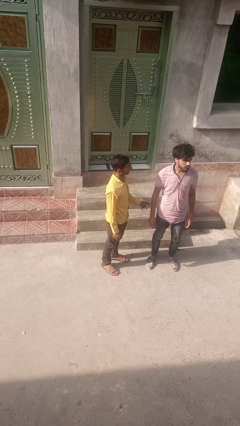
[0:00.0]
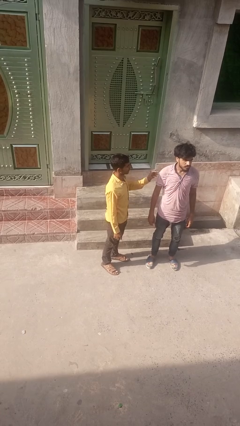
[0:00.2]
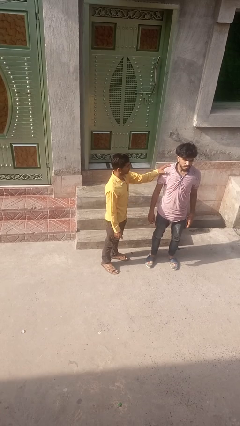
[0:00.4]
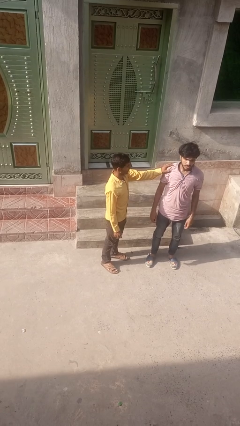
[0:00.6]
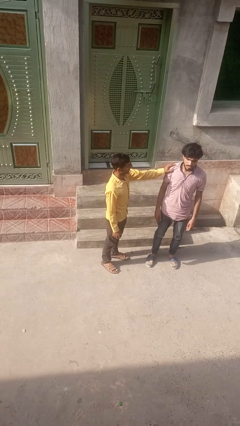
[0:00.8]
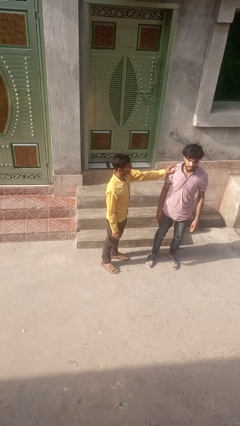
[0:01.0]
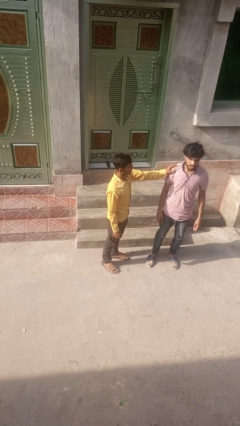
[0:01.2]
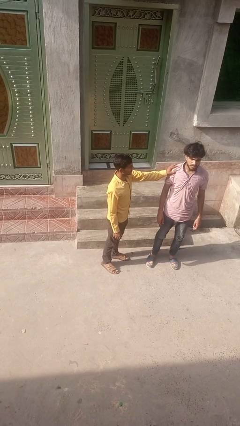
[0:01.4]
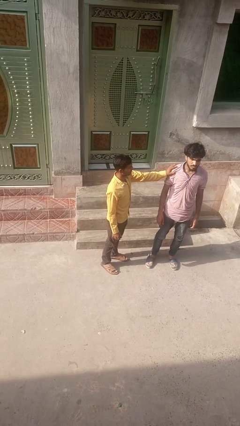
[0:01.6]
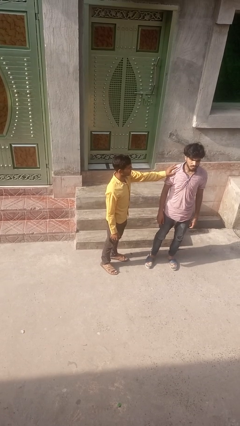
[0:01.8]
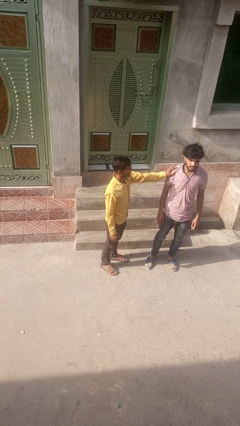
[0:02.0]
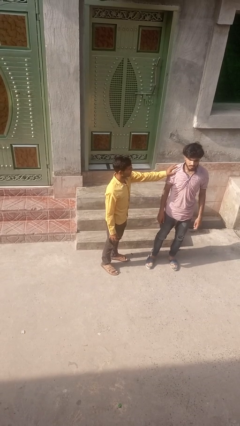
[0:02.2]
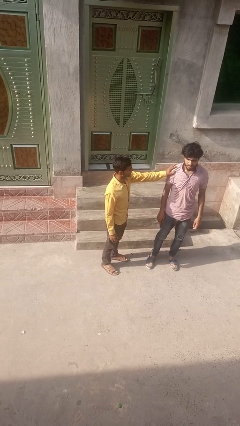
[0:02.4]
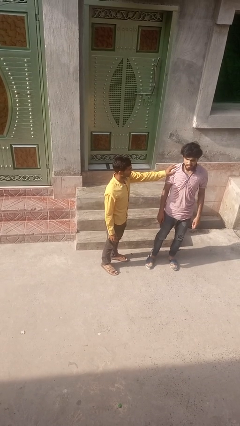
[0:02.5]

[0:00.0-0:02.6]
person grabs person by shoulder

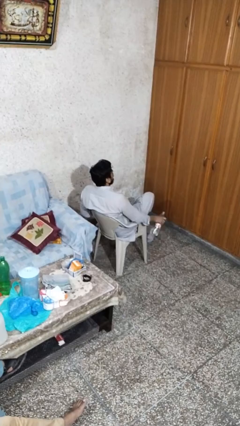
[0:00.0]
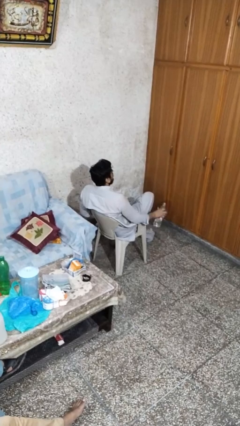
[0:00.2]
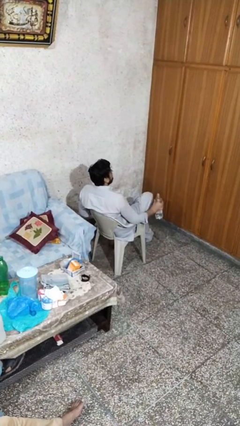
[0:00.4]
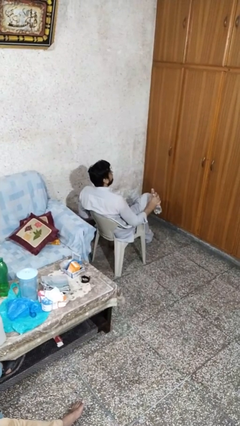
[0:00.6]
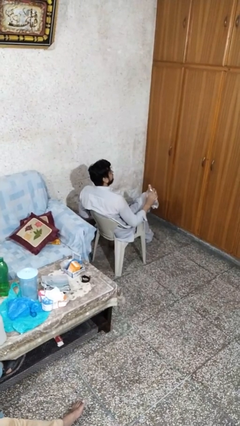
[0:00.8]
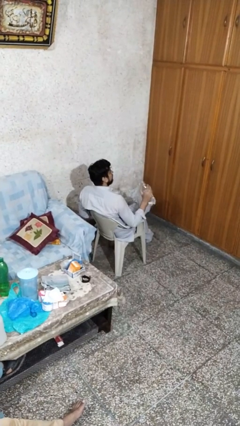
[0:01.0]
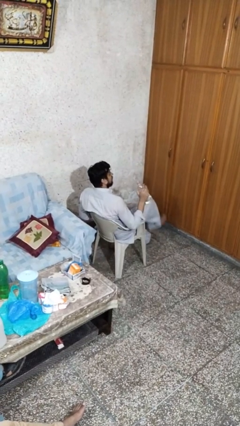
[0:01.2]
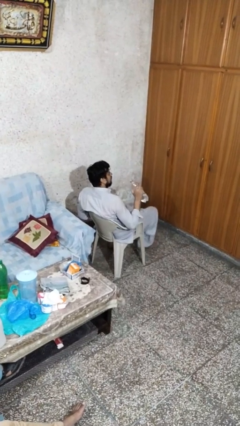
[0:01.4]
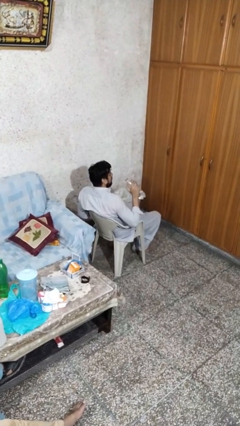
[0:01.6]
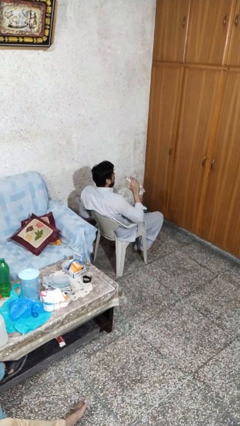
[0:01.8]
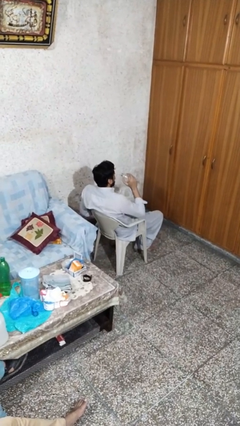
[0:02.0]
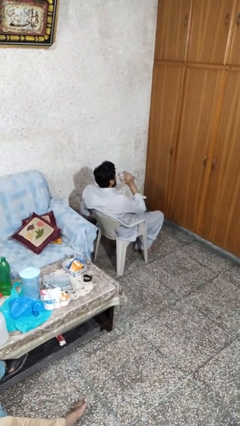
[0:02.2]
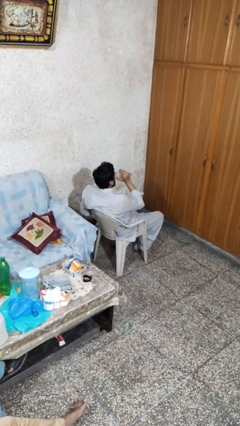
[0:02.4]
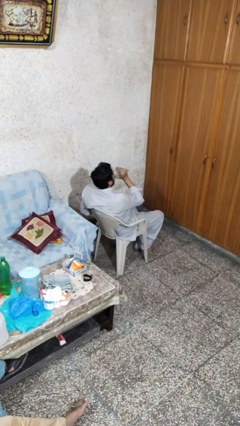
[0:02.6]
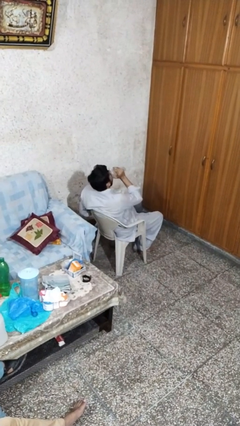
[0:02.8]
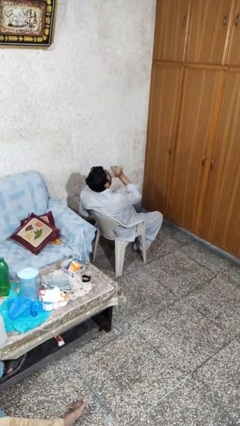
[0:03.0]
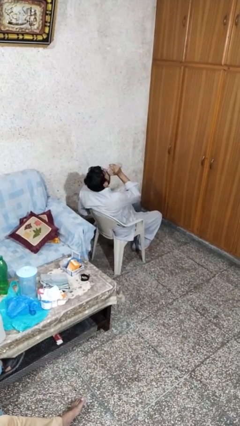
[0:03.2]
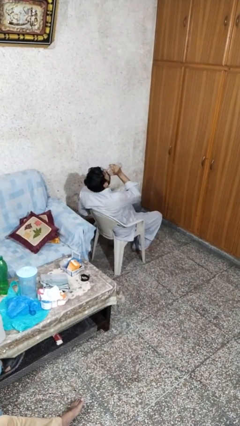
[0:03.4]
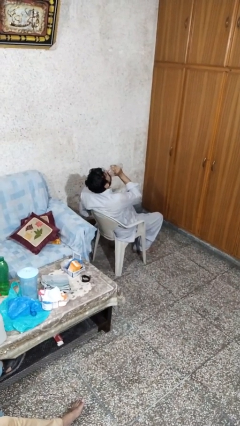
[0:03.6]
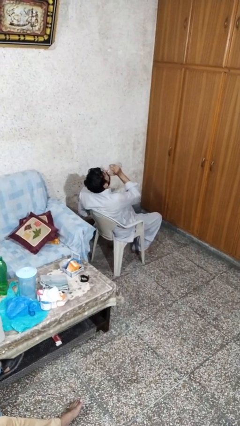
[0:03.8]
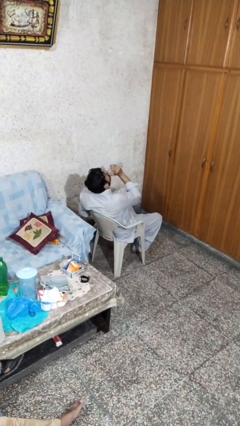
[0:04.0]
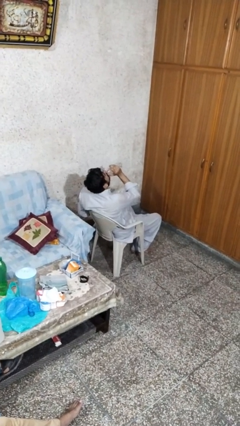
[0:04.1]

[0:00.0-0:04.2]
person drinks from bottle

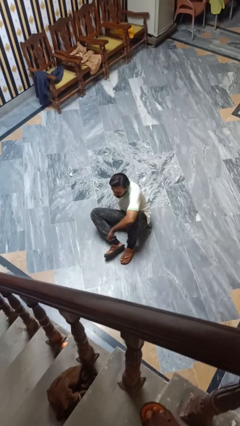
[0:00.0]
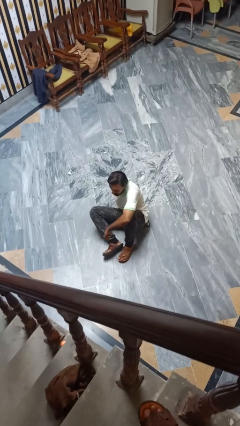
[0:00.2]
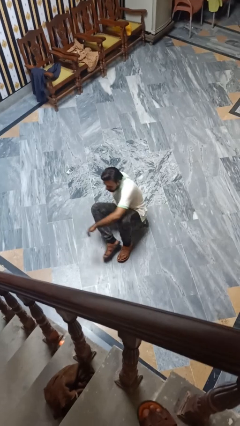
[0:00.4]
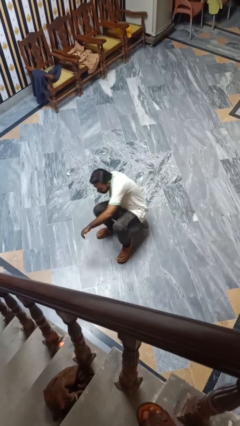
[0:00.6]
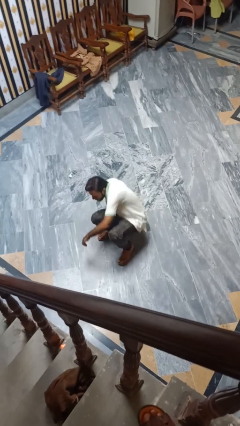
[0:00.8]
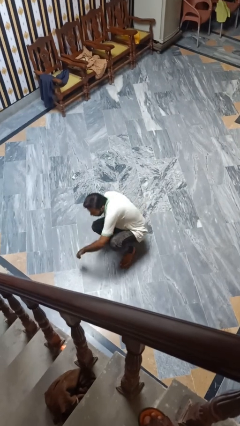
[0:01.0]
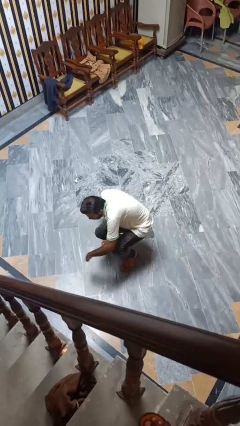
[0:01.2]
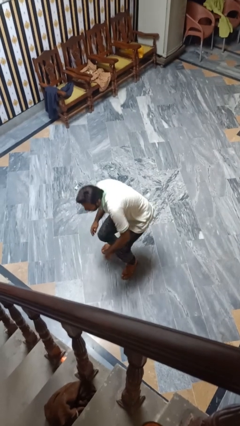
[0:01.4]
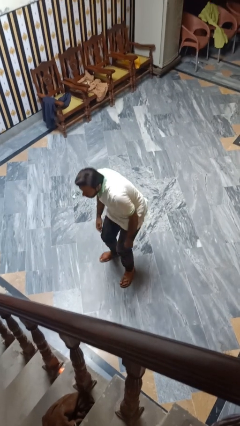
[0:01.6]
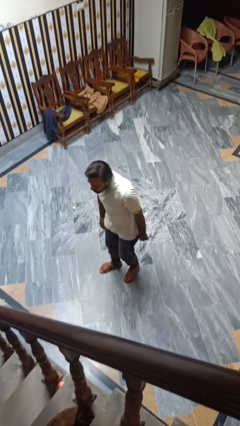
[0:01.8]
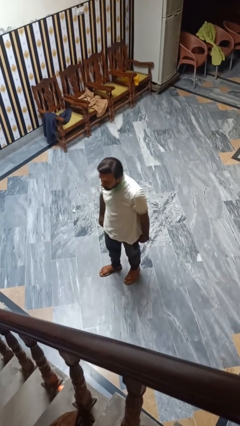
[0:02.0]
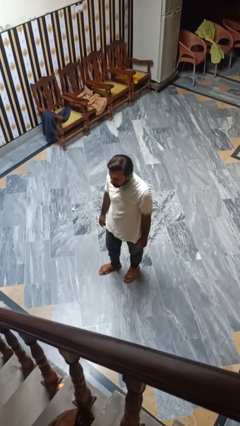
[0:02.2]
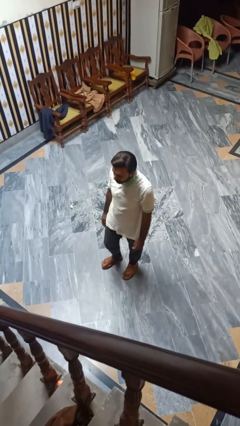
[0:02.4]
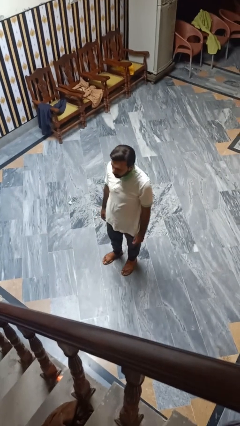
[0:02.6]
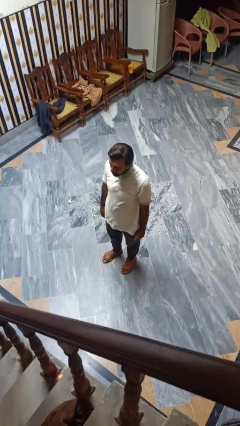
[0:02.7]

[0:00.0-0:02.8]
person stands up from floor

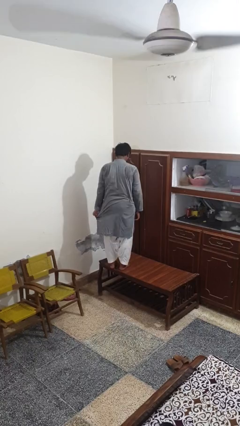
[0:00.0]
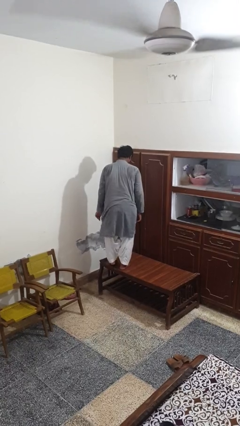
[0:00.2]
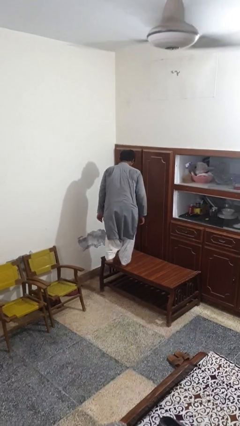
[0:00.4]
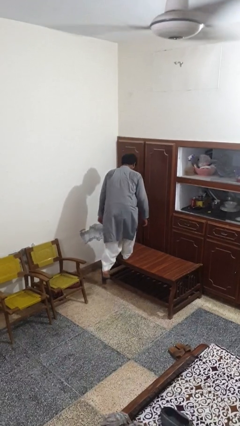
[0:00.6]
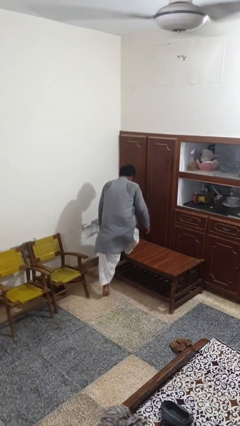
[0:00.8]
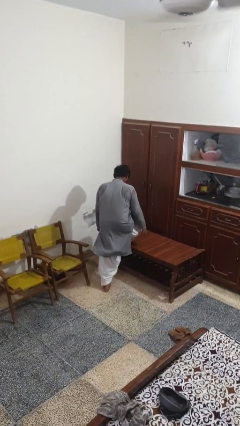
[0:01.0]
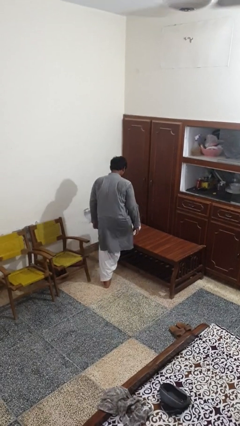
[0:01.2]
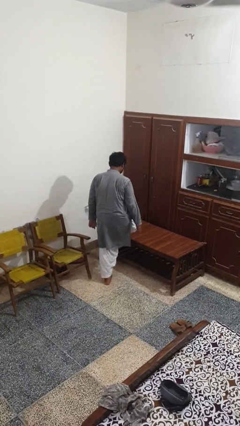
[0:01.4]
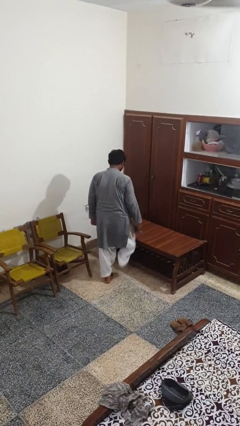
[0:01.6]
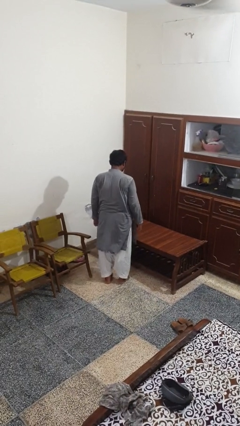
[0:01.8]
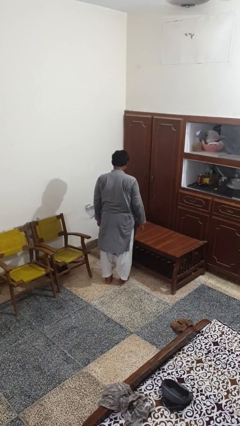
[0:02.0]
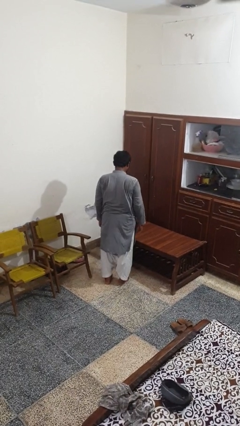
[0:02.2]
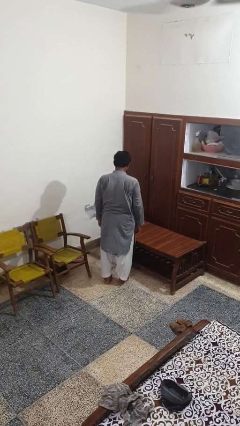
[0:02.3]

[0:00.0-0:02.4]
person climbs off table

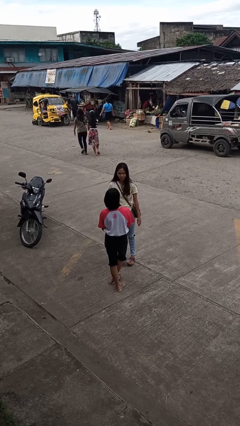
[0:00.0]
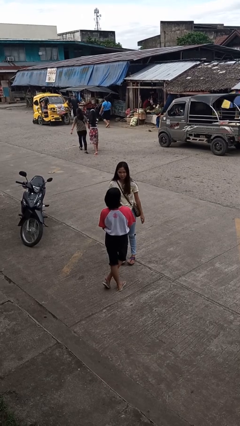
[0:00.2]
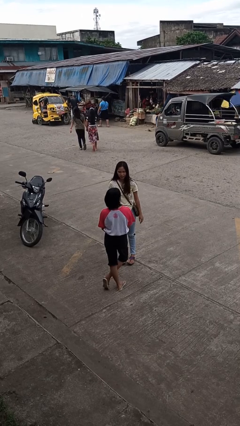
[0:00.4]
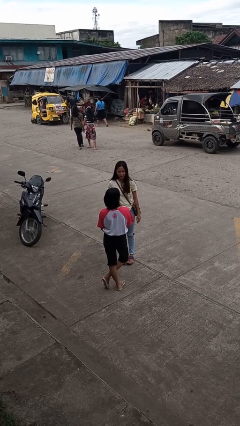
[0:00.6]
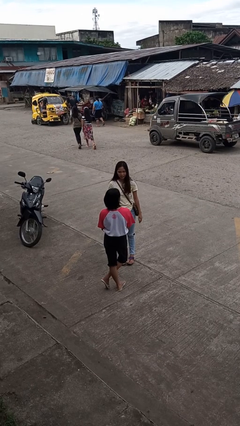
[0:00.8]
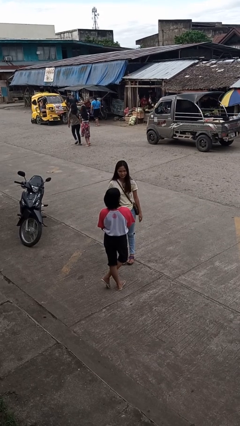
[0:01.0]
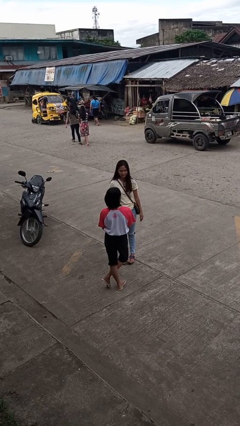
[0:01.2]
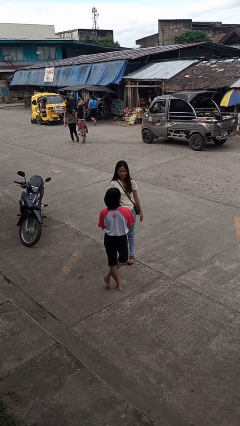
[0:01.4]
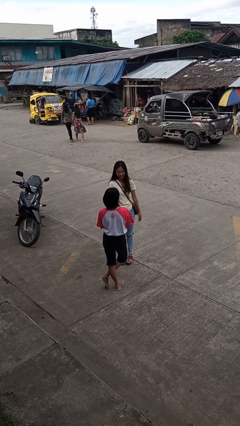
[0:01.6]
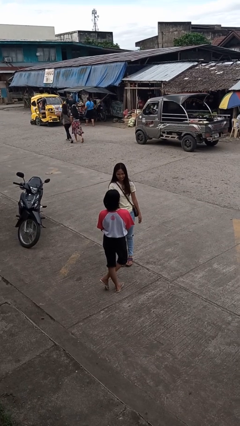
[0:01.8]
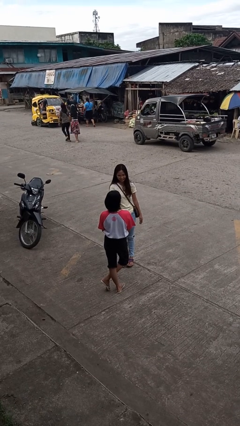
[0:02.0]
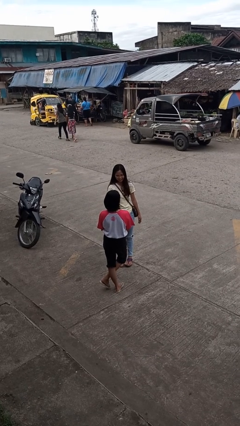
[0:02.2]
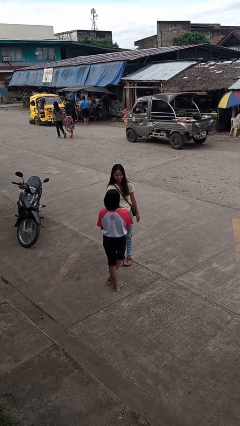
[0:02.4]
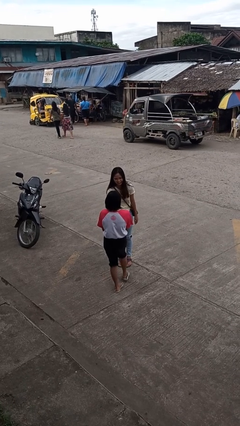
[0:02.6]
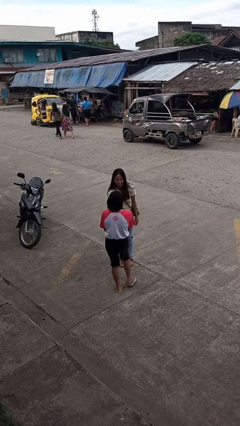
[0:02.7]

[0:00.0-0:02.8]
person laughs with person

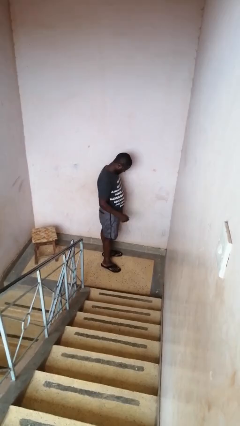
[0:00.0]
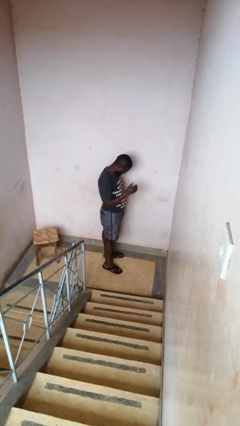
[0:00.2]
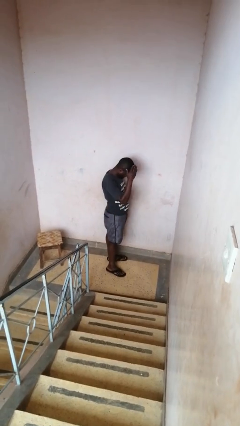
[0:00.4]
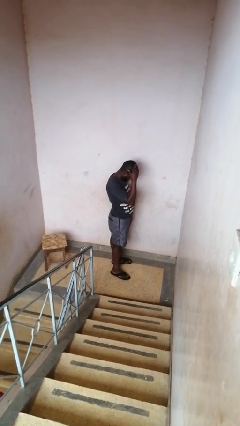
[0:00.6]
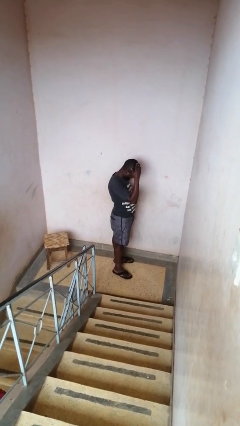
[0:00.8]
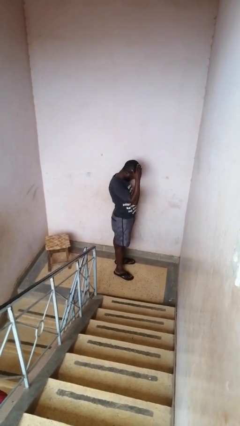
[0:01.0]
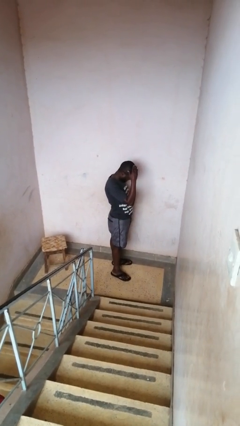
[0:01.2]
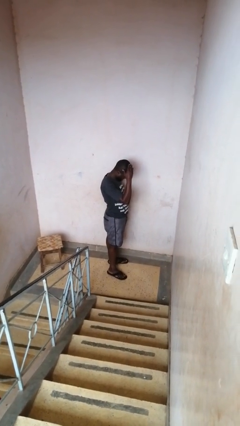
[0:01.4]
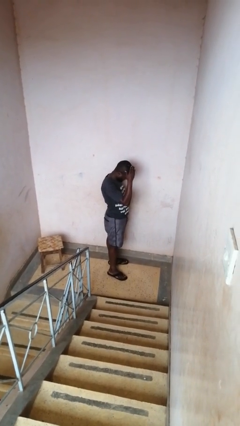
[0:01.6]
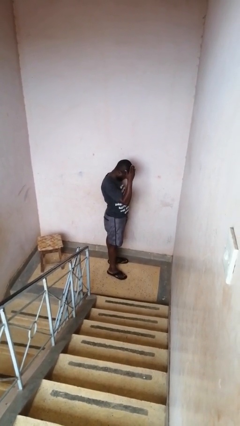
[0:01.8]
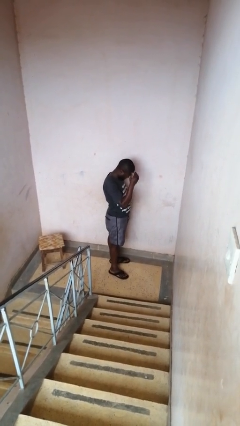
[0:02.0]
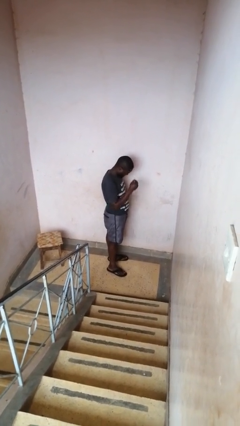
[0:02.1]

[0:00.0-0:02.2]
person pats head

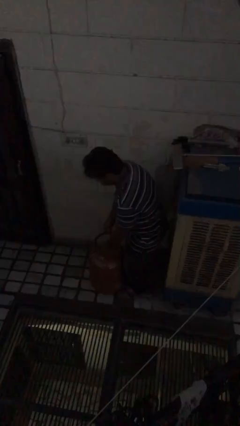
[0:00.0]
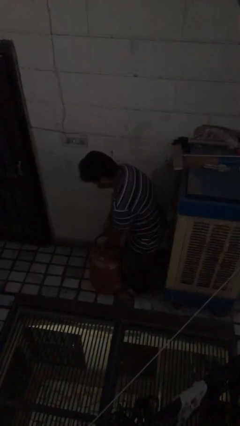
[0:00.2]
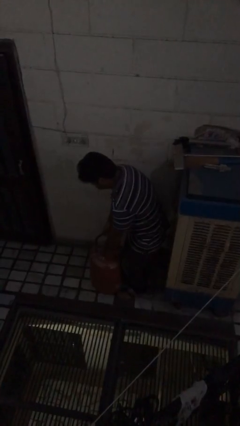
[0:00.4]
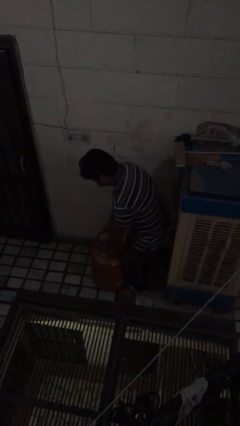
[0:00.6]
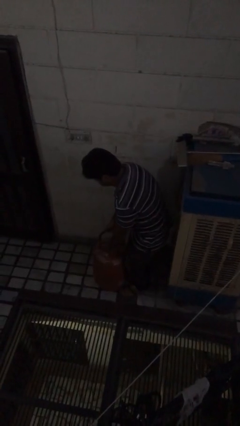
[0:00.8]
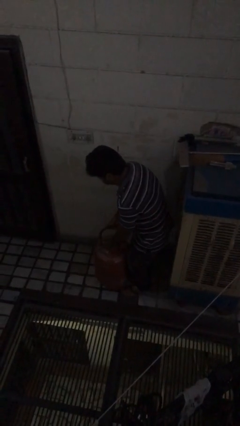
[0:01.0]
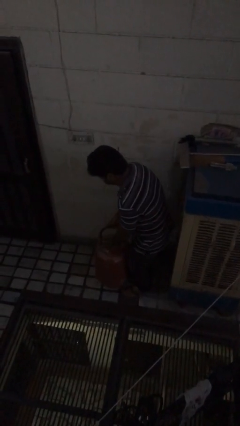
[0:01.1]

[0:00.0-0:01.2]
person picks up object from floor
